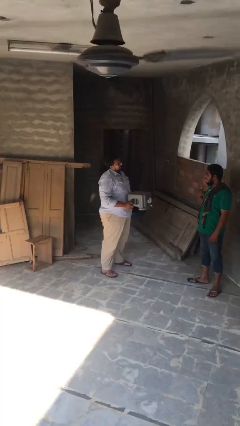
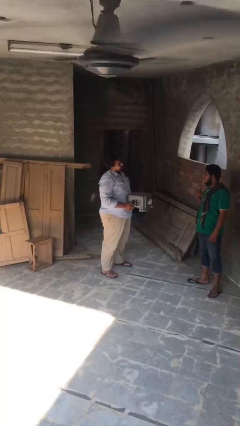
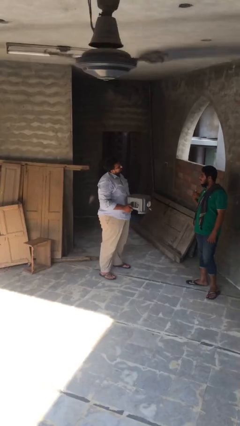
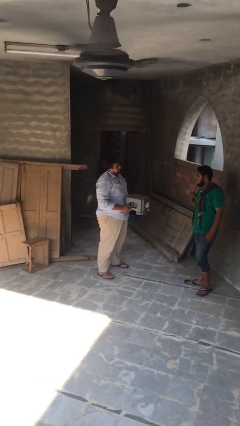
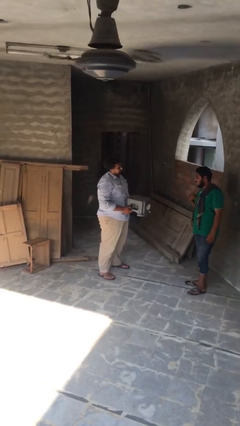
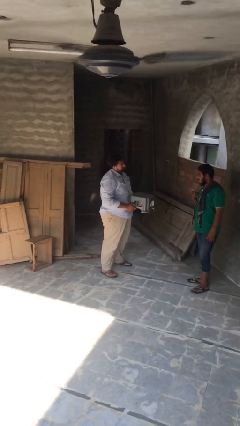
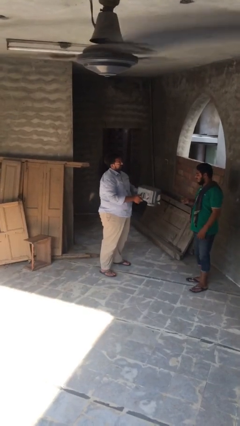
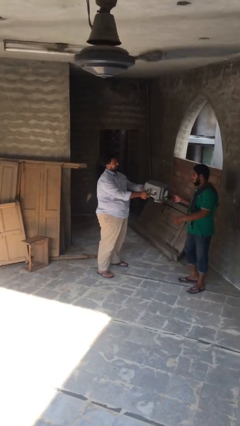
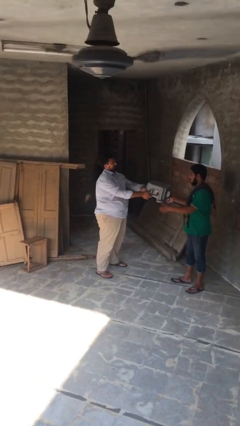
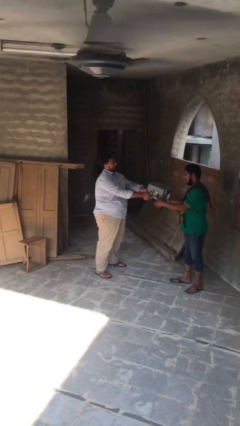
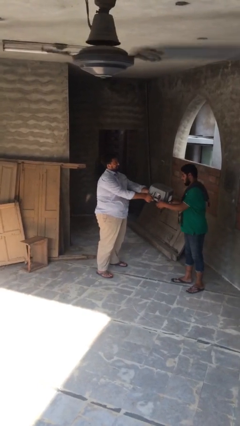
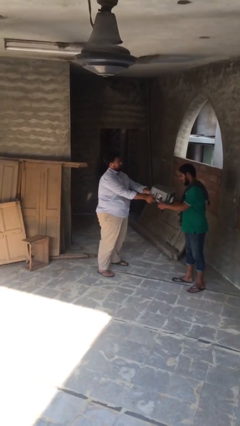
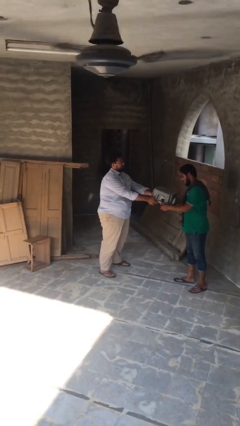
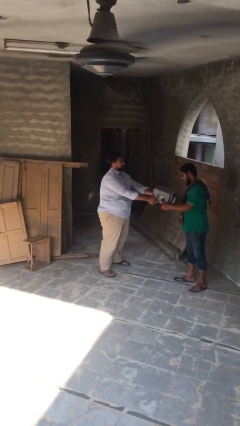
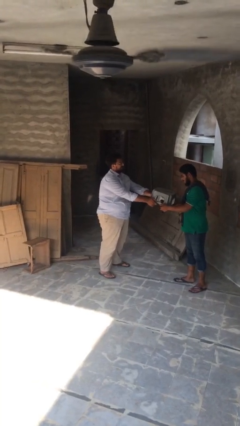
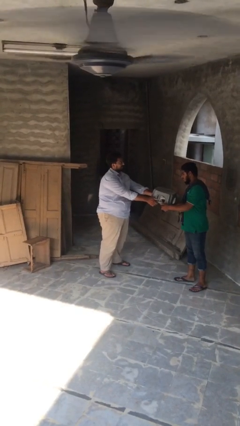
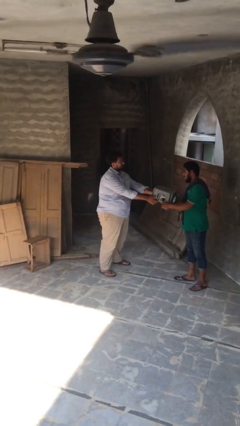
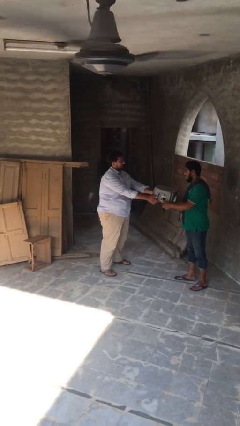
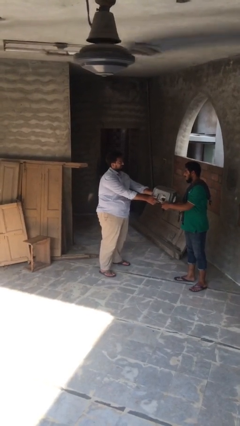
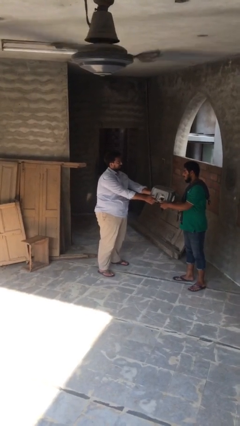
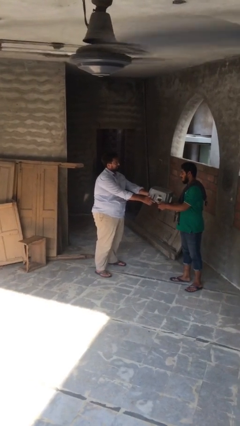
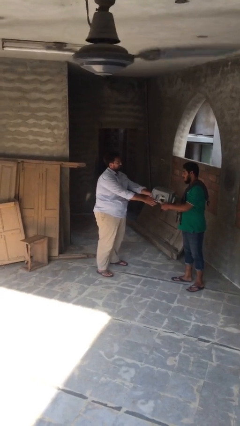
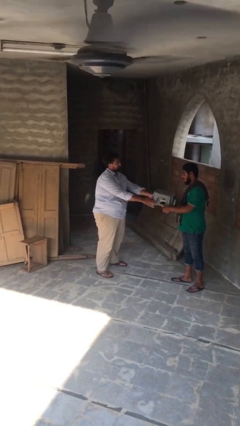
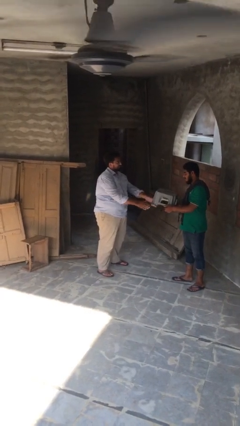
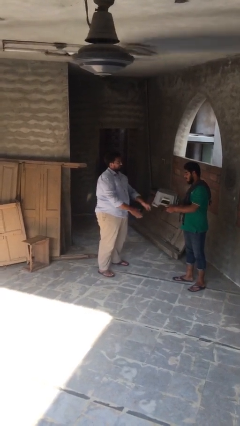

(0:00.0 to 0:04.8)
person transfers object to person

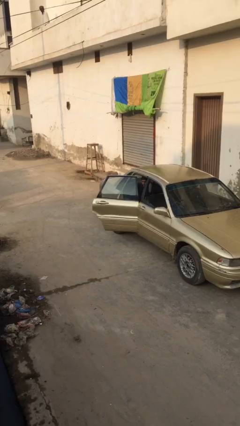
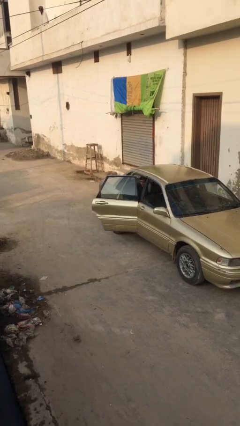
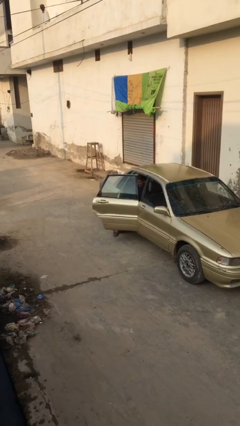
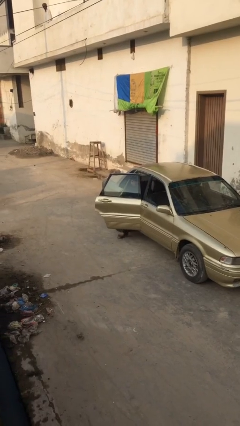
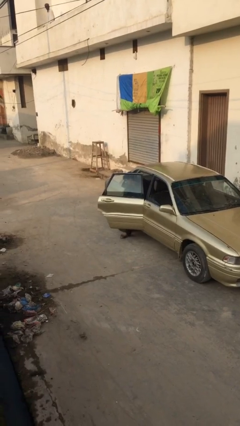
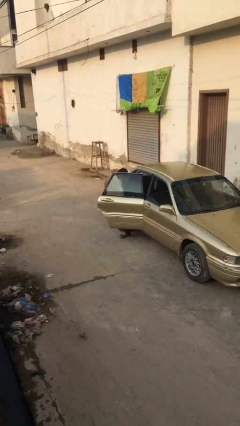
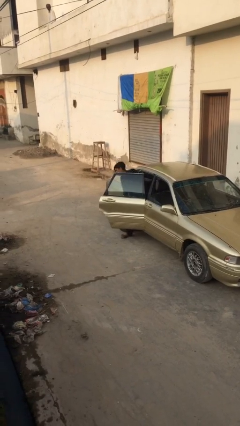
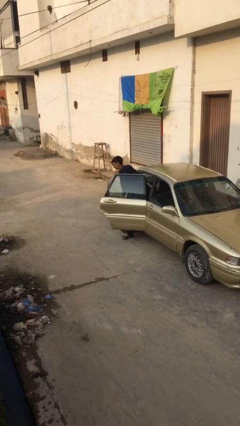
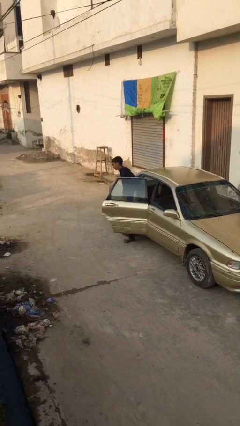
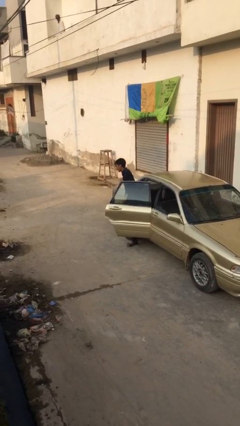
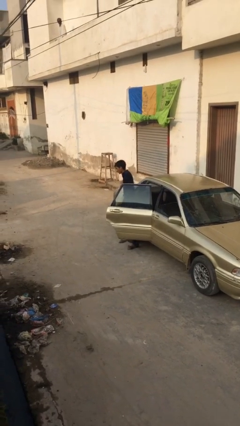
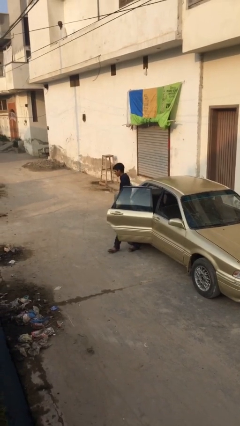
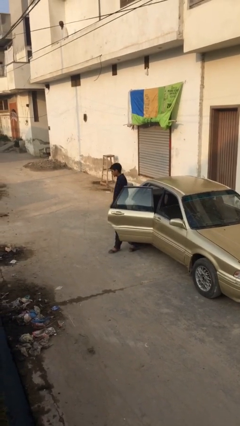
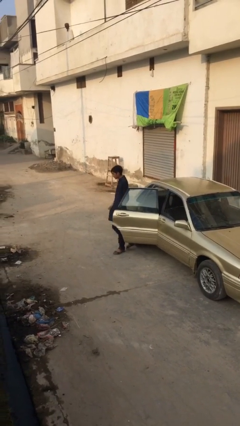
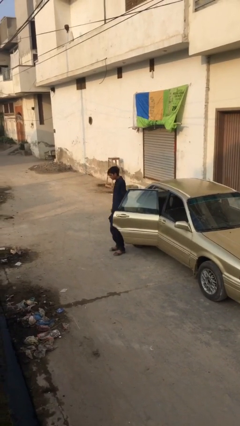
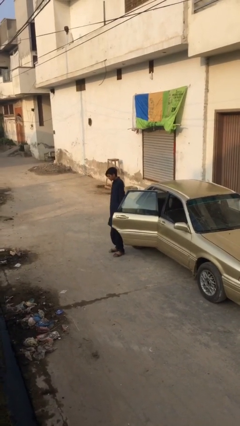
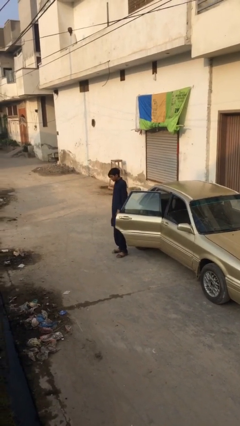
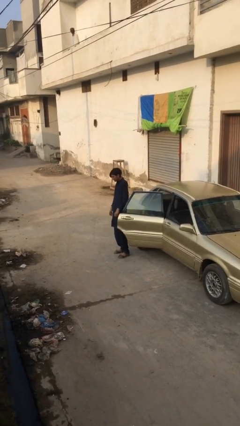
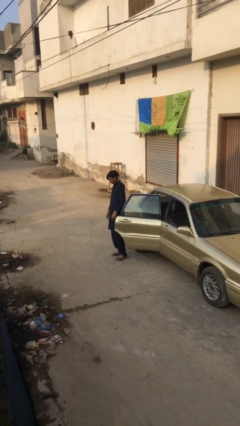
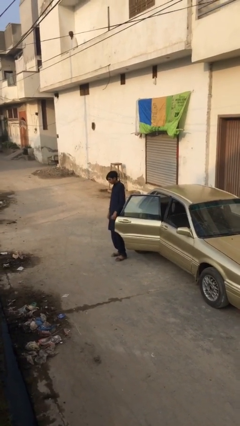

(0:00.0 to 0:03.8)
person exits car

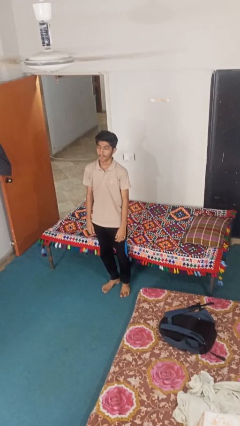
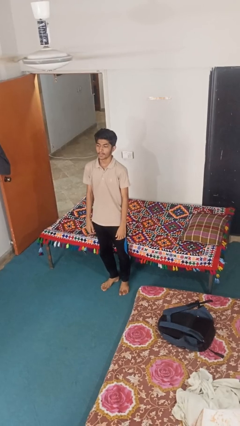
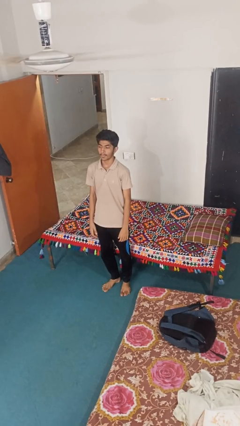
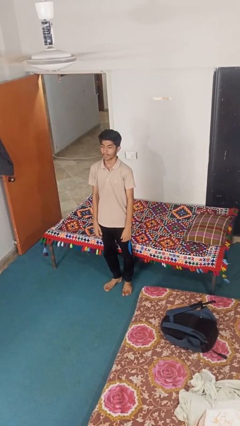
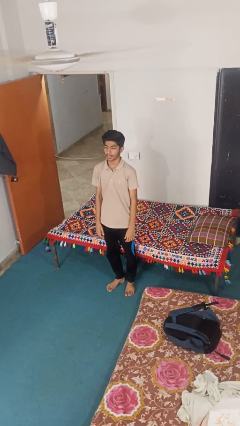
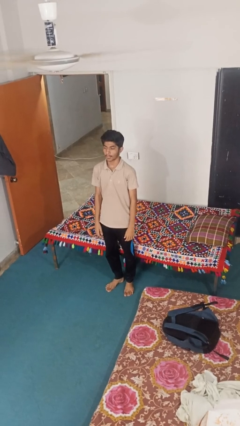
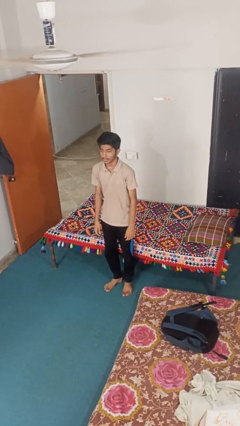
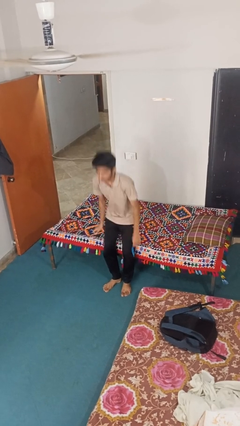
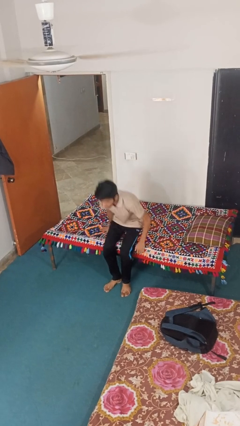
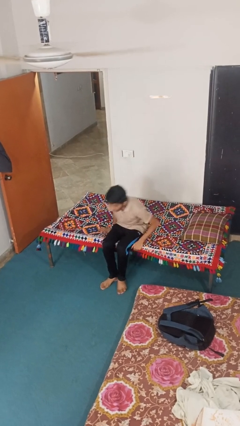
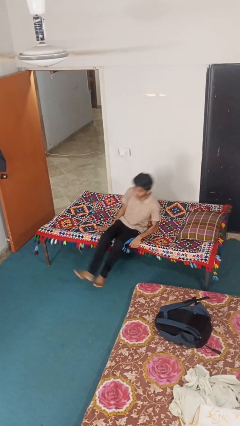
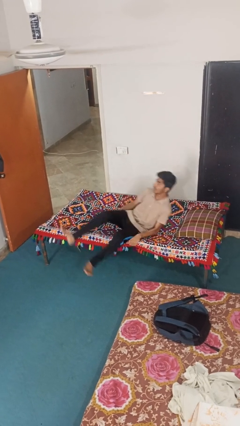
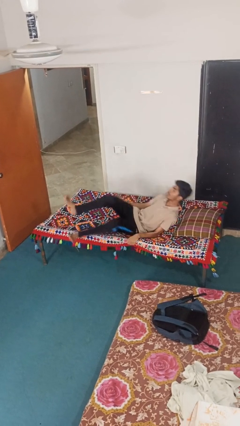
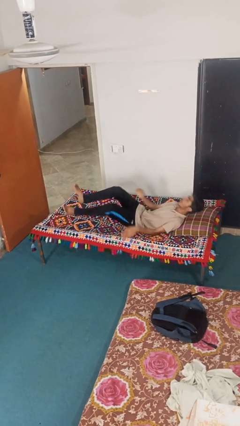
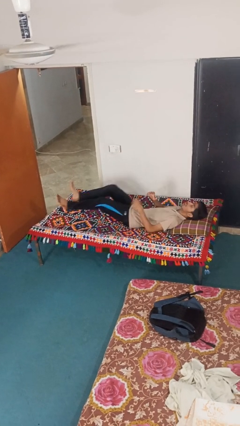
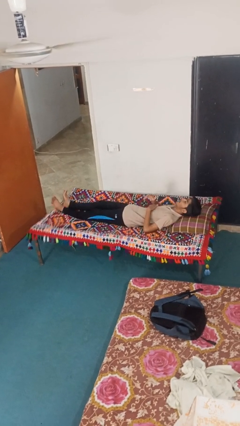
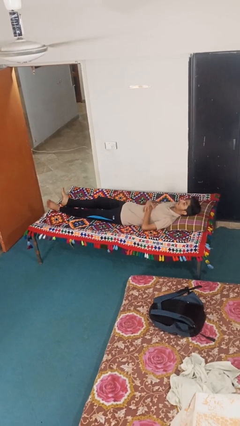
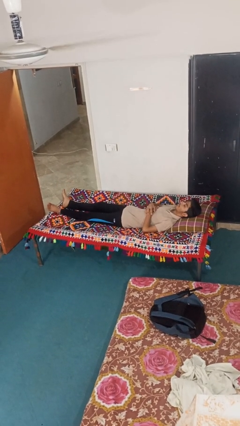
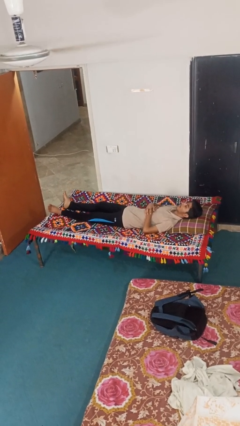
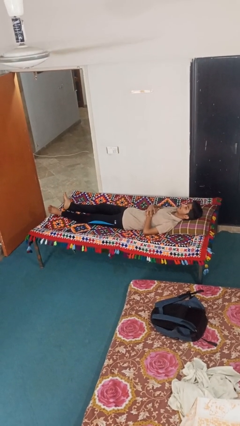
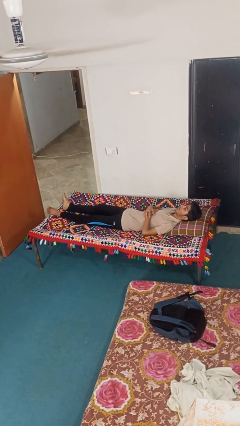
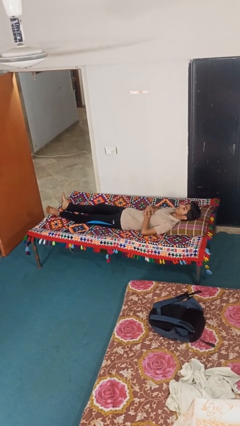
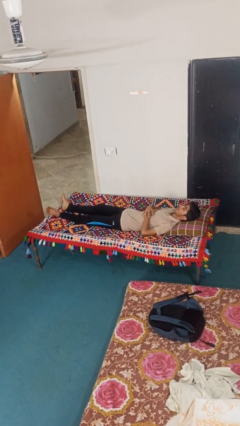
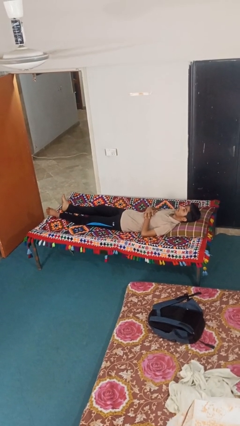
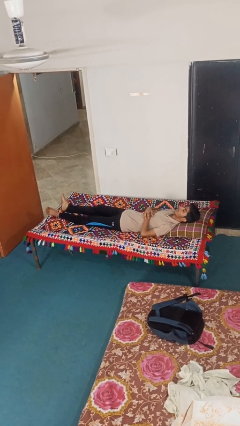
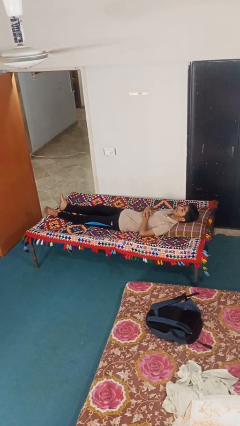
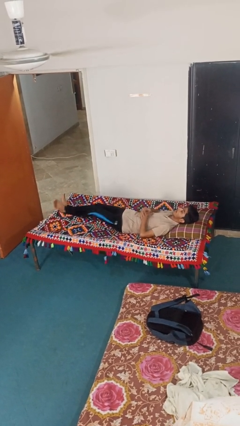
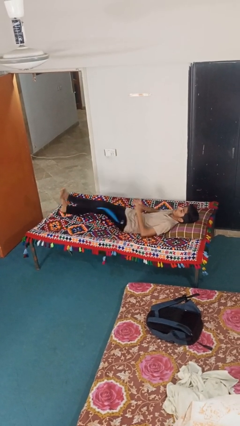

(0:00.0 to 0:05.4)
person lies down on bed

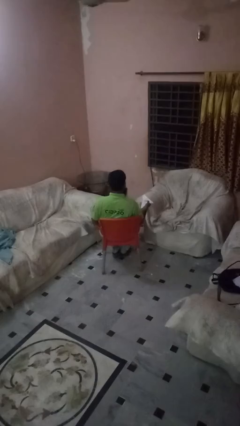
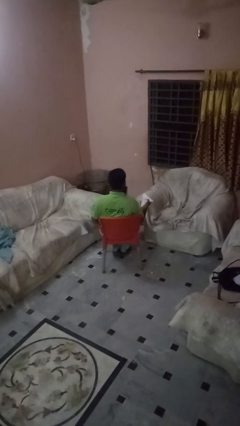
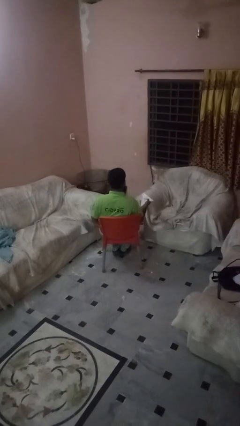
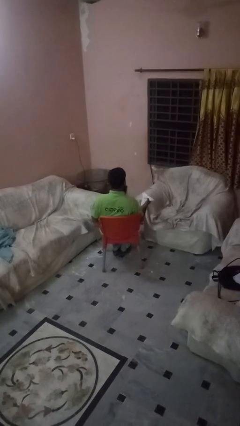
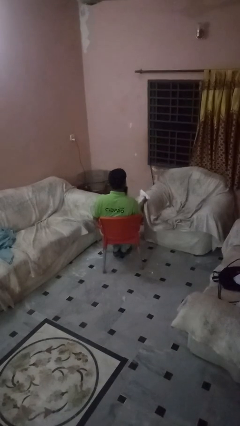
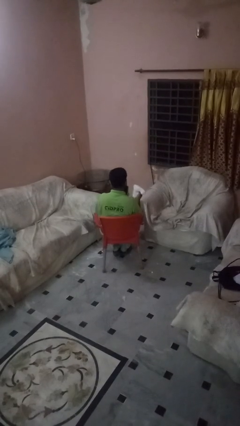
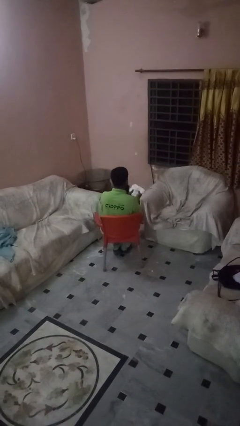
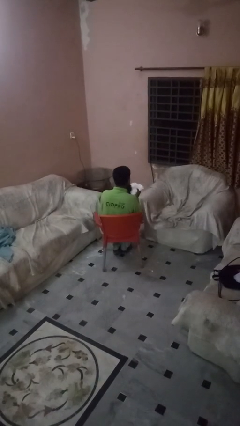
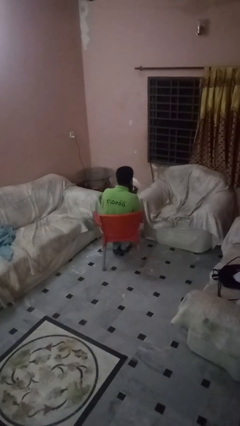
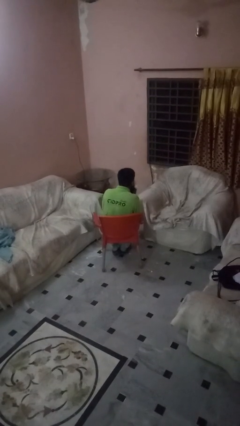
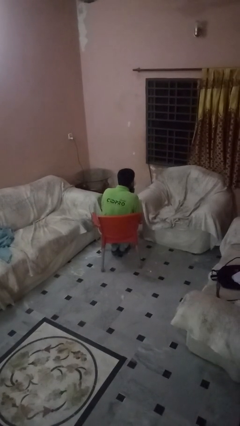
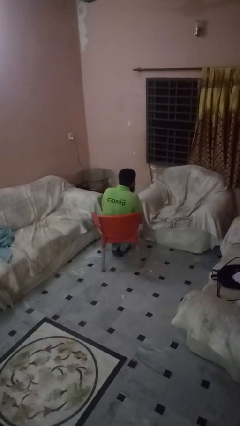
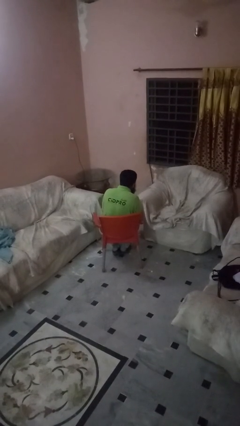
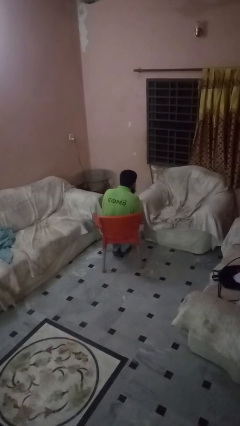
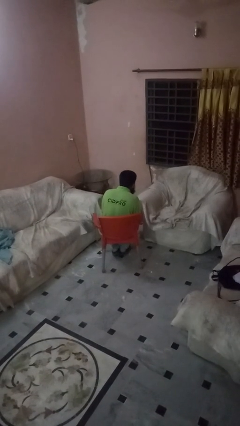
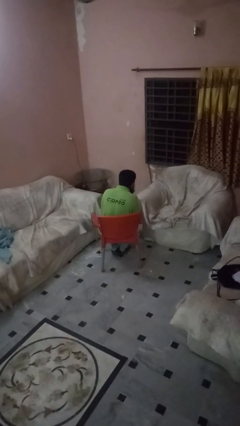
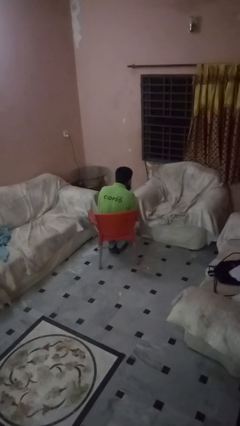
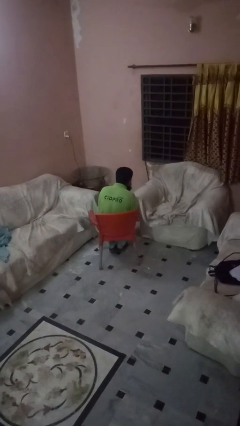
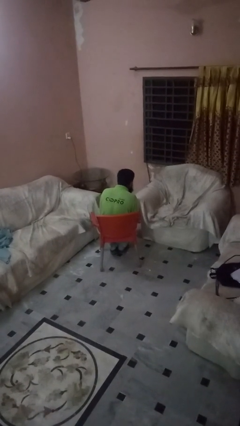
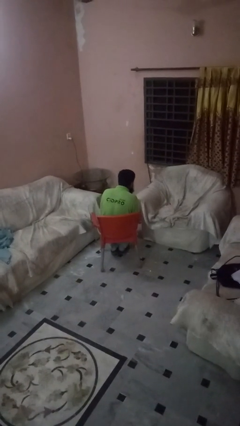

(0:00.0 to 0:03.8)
person blows nose
